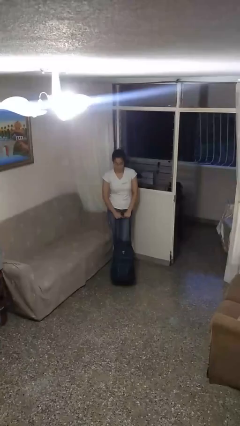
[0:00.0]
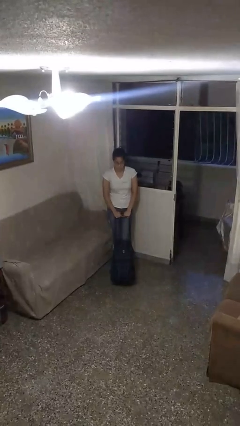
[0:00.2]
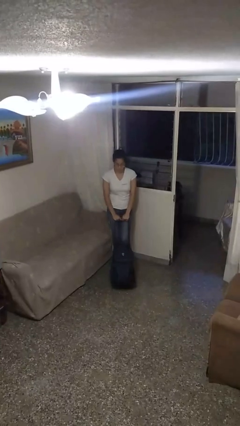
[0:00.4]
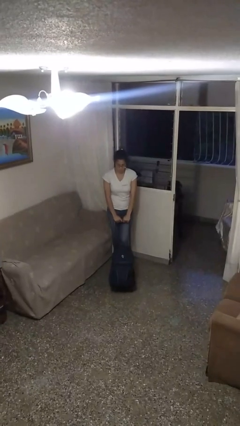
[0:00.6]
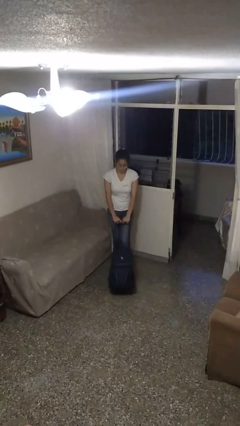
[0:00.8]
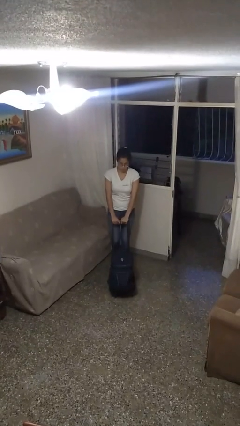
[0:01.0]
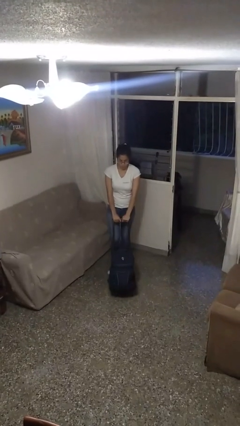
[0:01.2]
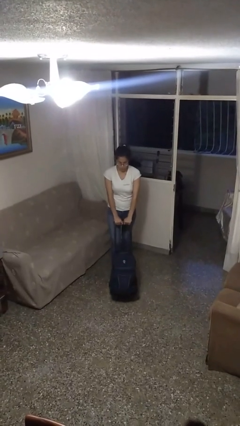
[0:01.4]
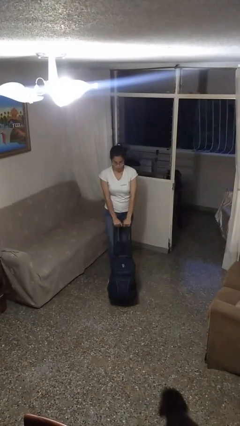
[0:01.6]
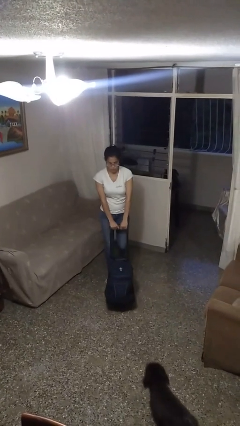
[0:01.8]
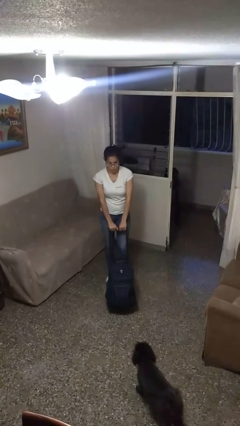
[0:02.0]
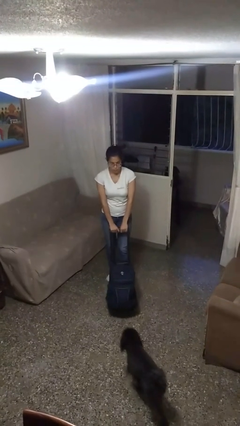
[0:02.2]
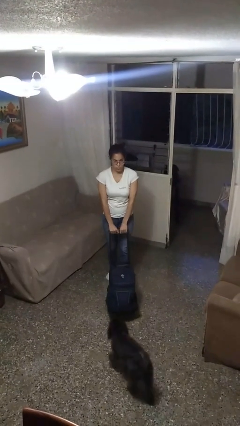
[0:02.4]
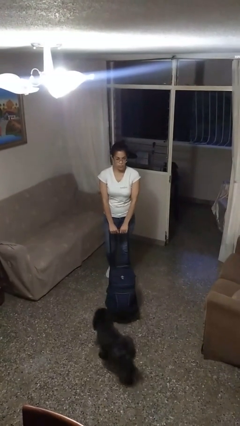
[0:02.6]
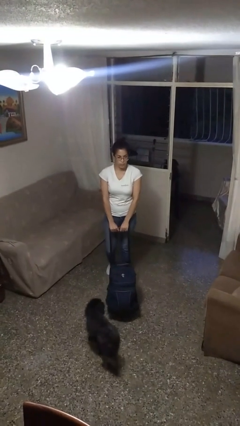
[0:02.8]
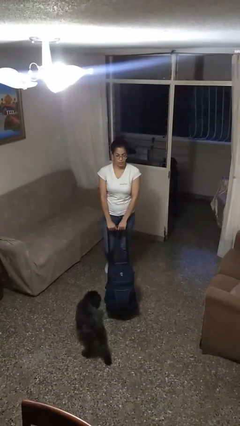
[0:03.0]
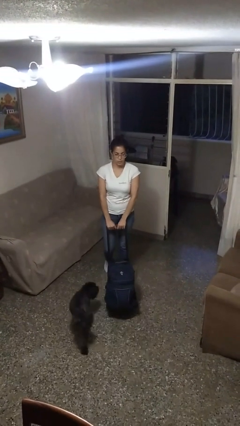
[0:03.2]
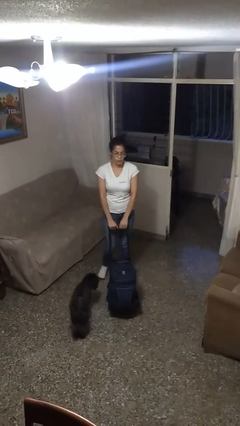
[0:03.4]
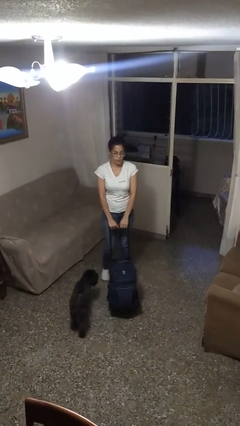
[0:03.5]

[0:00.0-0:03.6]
person pushes wheeled cart

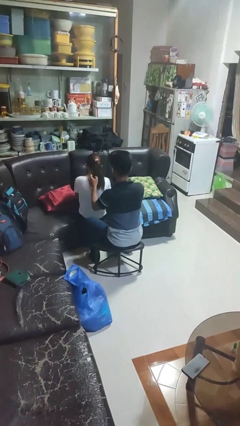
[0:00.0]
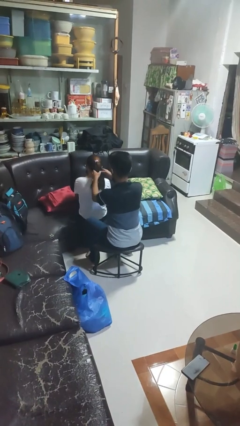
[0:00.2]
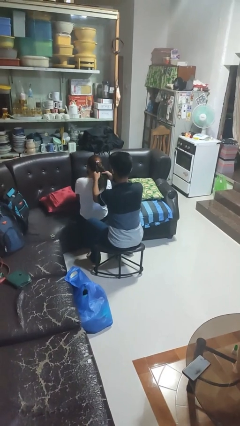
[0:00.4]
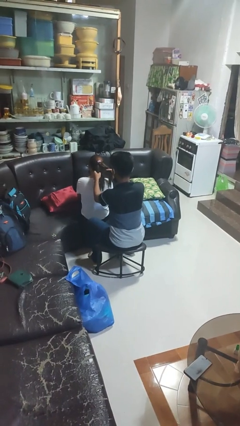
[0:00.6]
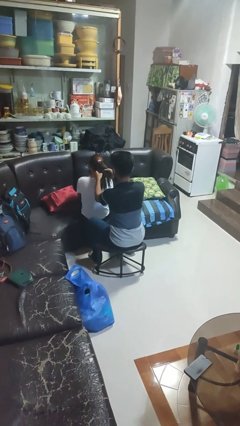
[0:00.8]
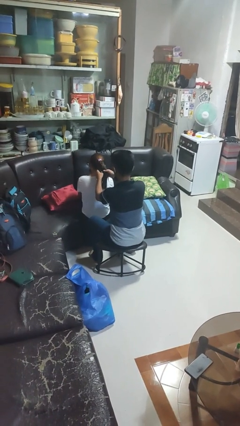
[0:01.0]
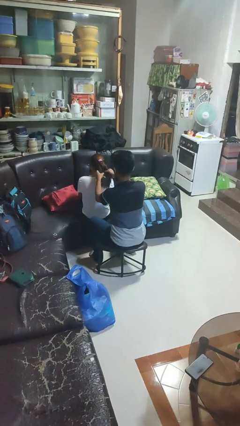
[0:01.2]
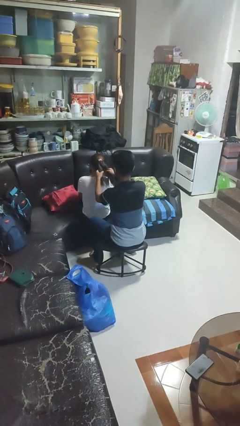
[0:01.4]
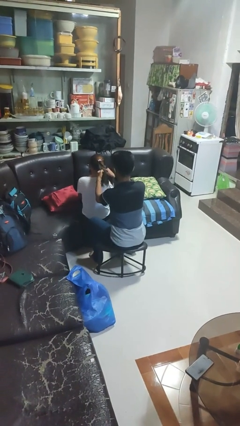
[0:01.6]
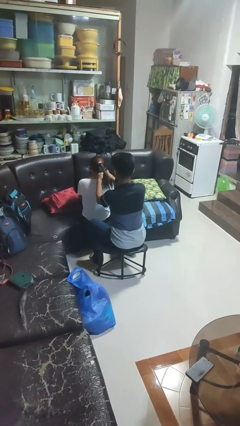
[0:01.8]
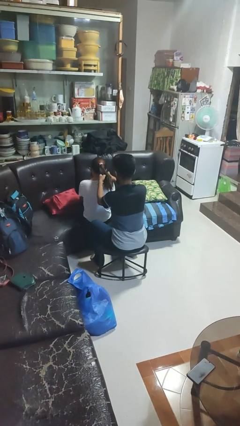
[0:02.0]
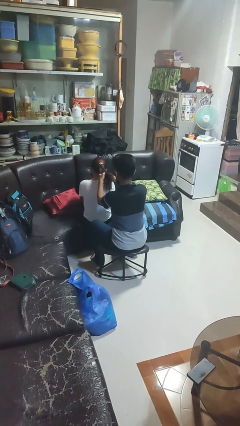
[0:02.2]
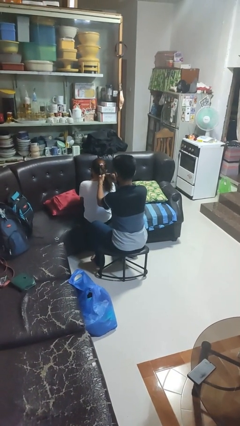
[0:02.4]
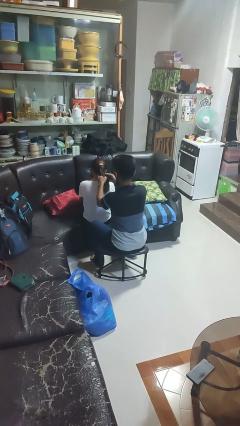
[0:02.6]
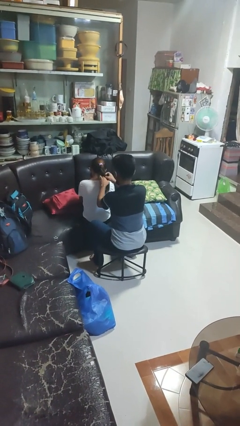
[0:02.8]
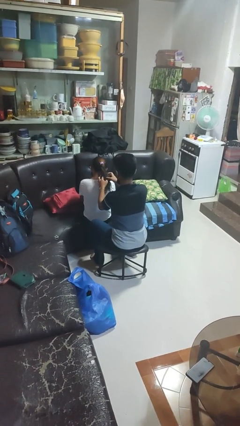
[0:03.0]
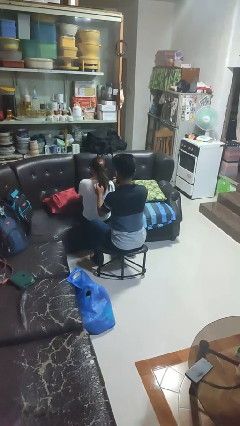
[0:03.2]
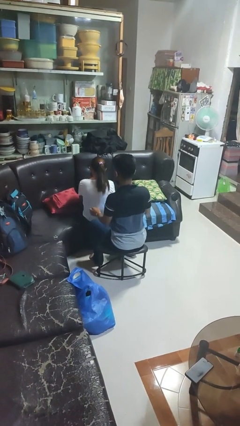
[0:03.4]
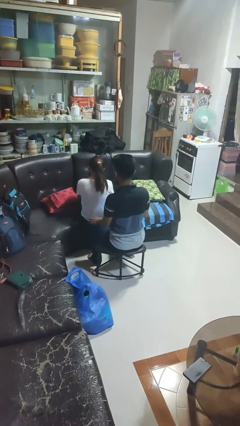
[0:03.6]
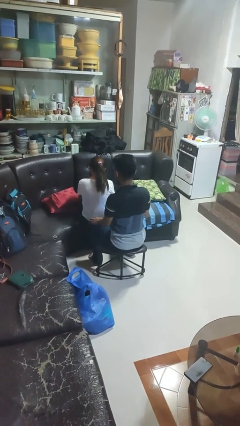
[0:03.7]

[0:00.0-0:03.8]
person braids hair of person

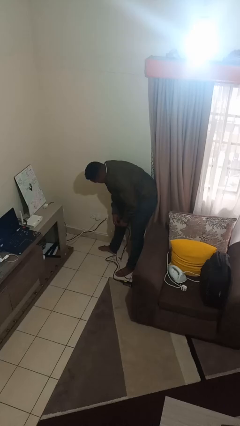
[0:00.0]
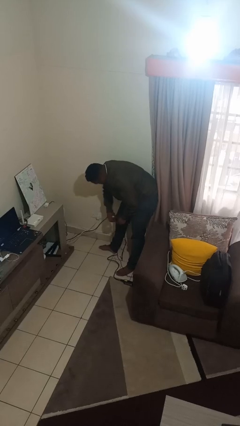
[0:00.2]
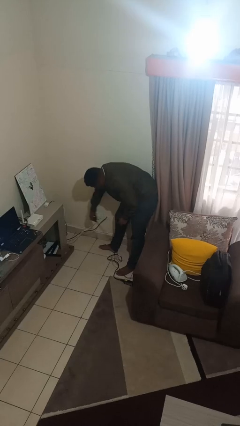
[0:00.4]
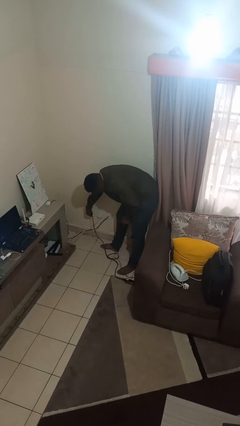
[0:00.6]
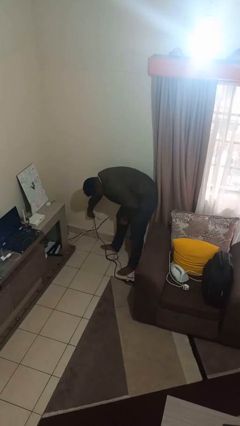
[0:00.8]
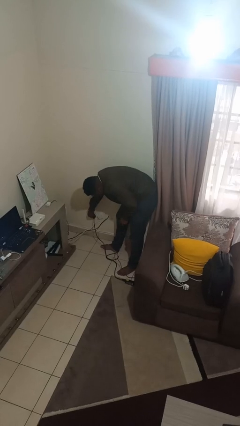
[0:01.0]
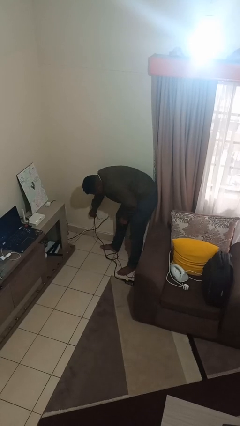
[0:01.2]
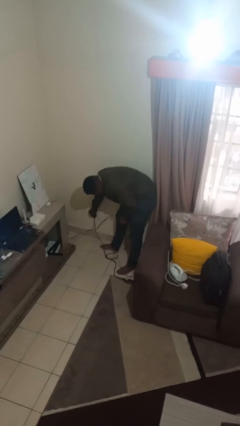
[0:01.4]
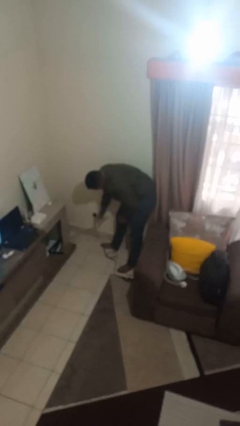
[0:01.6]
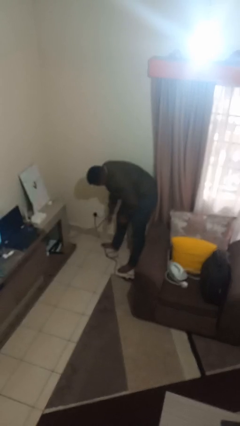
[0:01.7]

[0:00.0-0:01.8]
person plugs into electrical socket

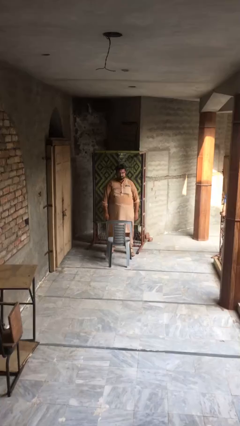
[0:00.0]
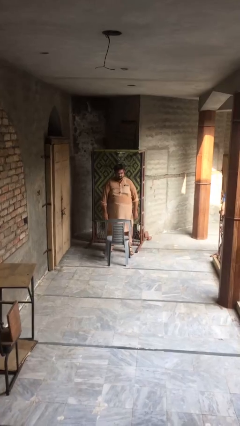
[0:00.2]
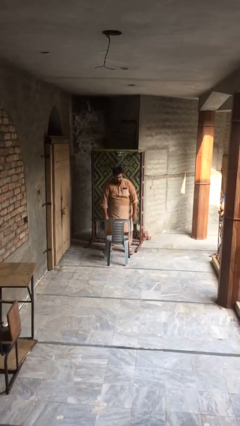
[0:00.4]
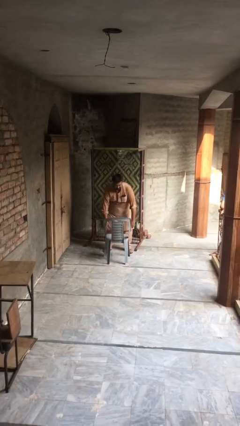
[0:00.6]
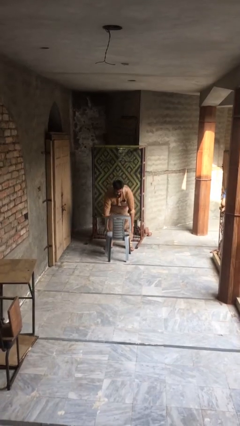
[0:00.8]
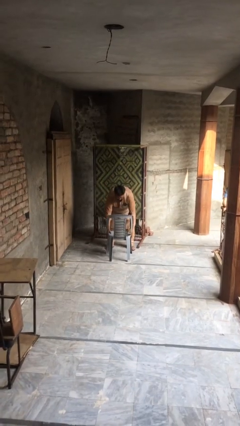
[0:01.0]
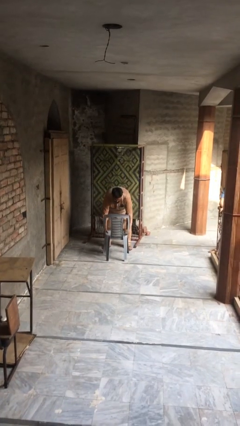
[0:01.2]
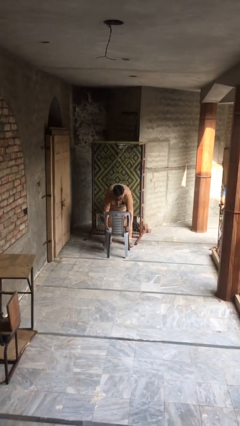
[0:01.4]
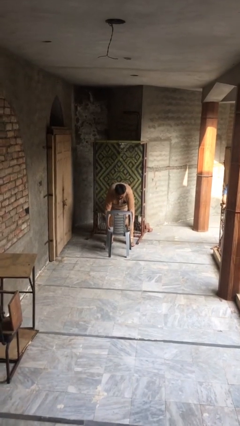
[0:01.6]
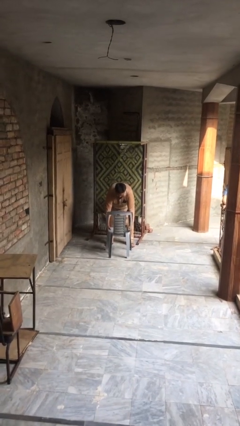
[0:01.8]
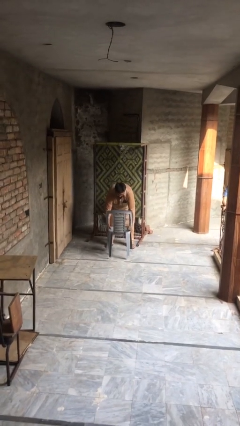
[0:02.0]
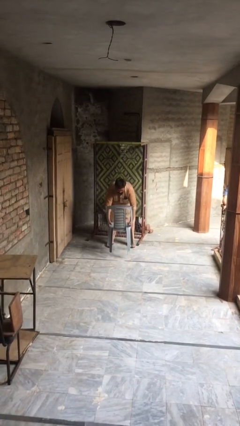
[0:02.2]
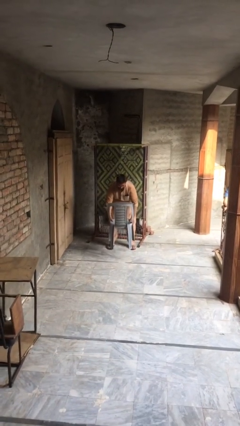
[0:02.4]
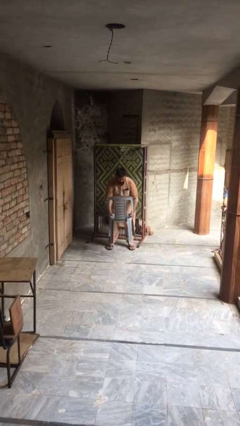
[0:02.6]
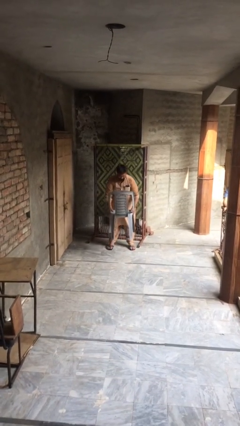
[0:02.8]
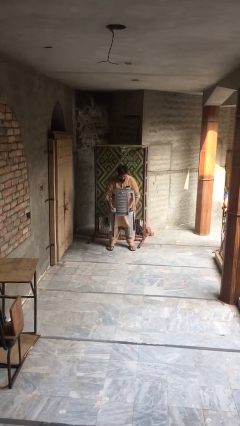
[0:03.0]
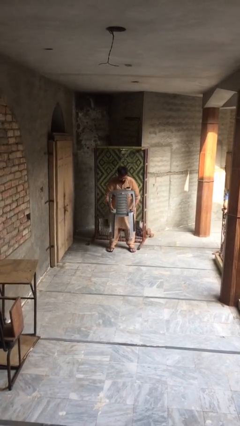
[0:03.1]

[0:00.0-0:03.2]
person picks up object from floor

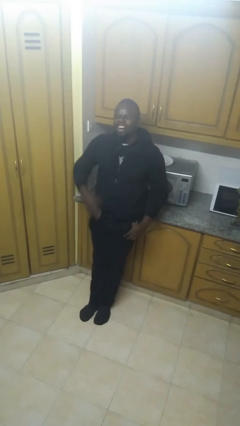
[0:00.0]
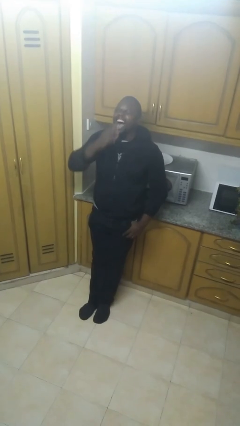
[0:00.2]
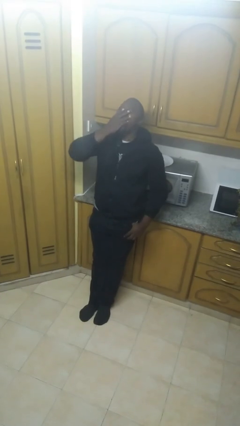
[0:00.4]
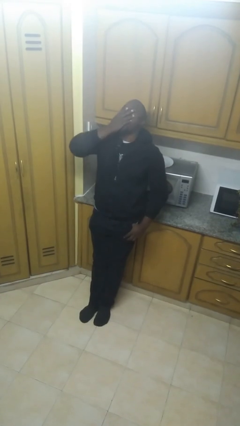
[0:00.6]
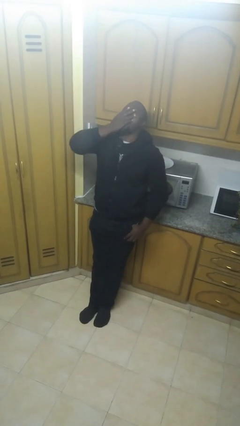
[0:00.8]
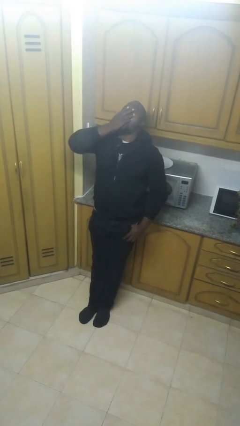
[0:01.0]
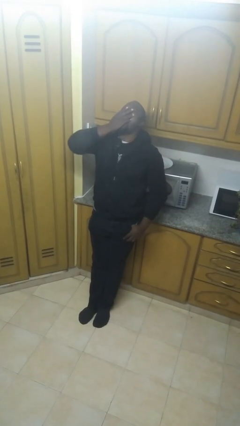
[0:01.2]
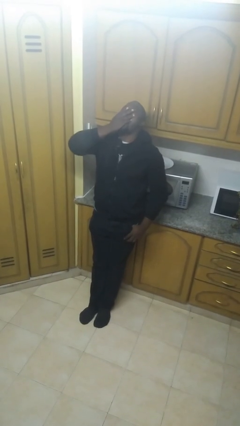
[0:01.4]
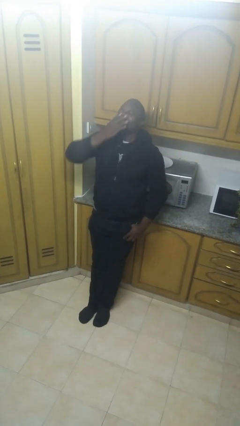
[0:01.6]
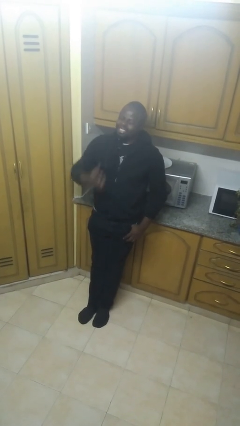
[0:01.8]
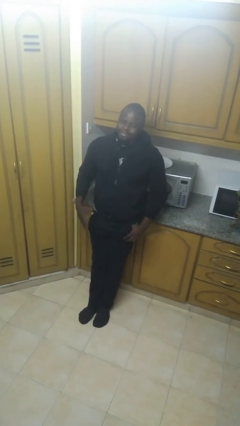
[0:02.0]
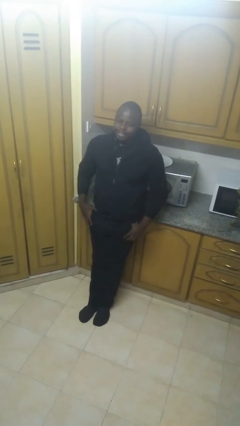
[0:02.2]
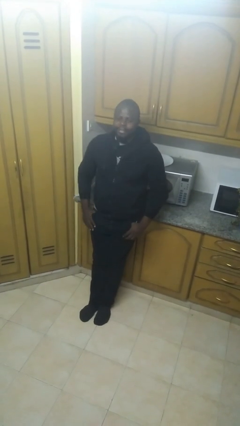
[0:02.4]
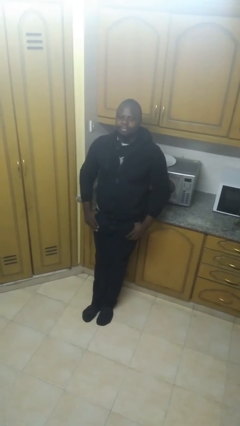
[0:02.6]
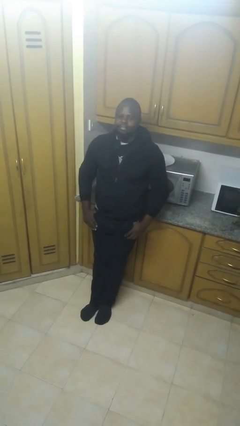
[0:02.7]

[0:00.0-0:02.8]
person yawns

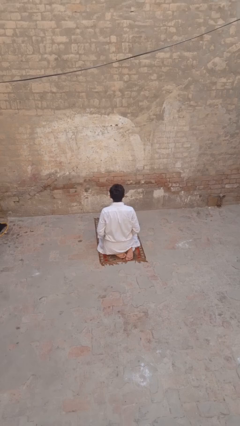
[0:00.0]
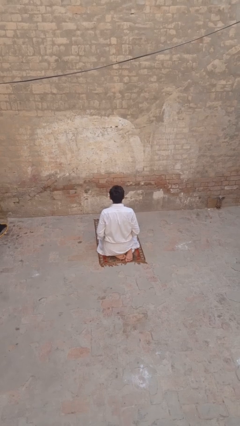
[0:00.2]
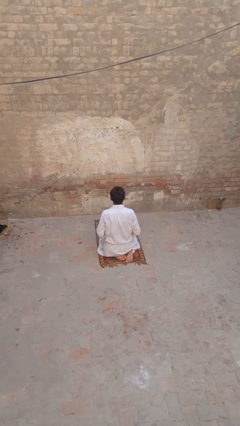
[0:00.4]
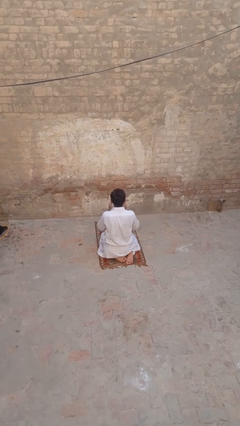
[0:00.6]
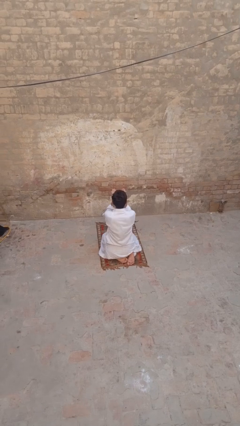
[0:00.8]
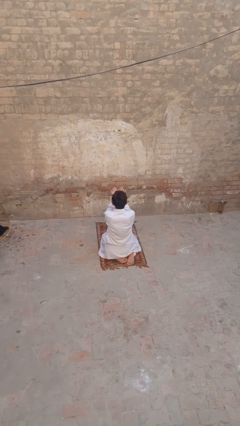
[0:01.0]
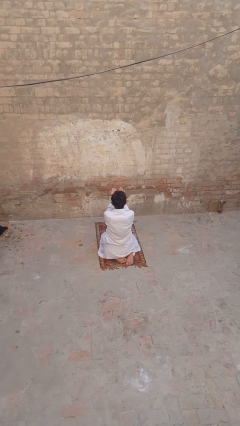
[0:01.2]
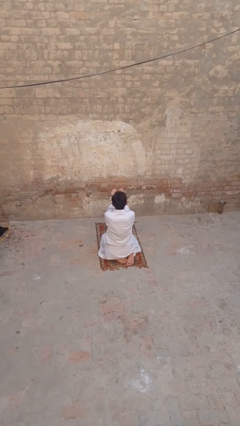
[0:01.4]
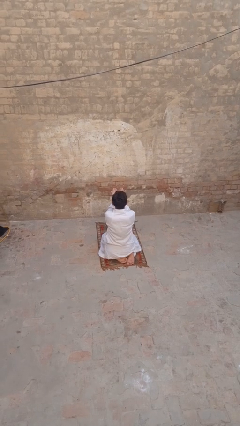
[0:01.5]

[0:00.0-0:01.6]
person prays
